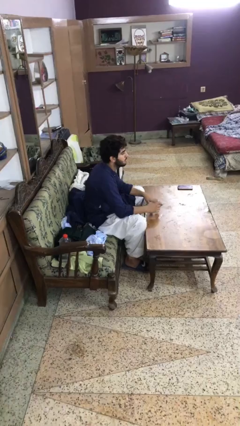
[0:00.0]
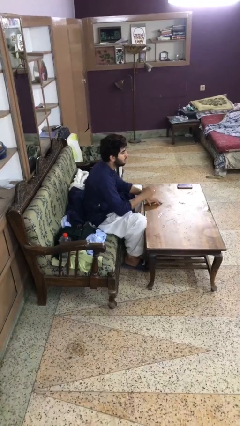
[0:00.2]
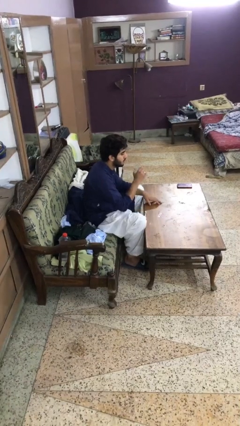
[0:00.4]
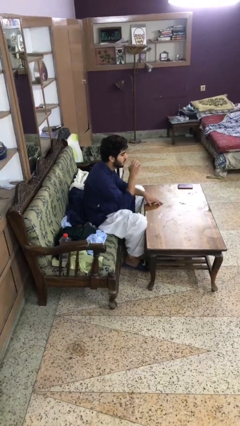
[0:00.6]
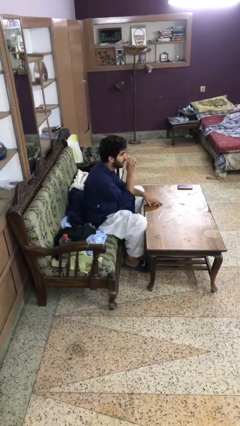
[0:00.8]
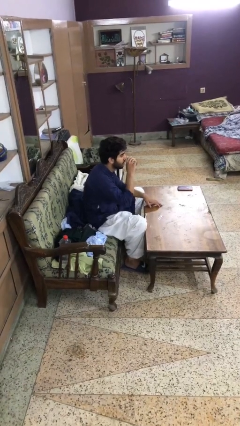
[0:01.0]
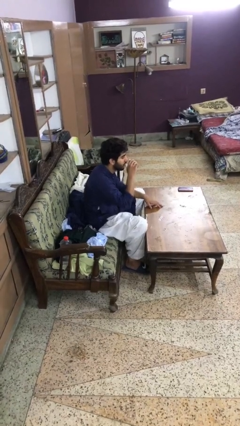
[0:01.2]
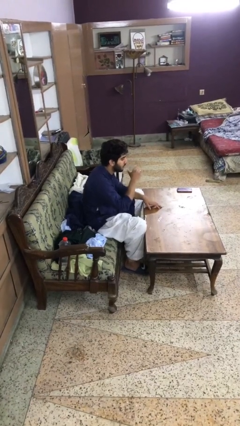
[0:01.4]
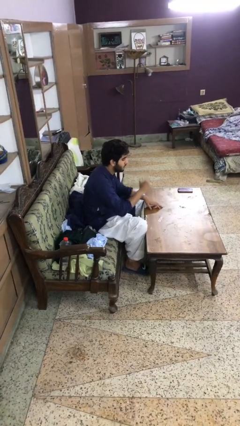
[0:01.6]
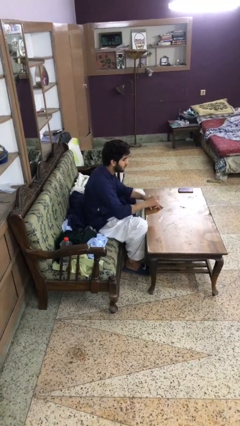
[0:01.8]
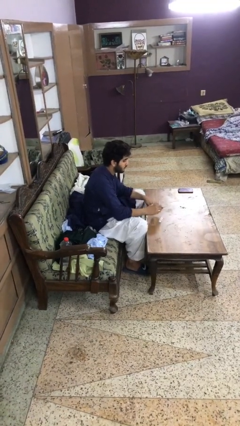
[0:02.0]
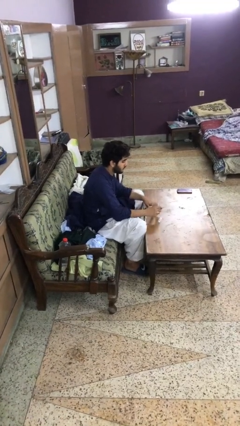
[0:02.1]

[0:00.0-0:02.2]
person drinks from cup

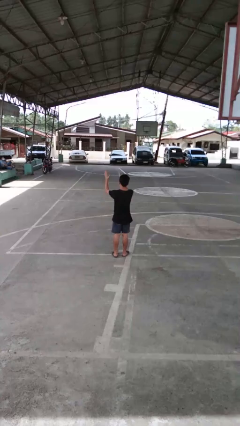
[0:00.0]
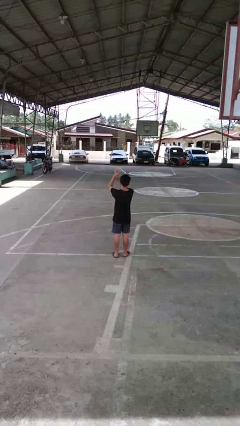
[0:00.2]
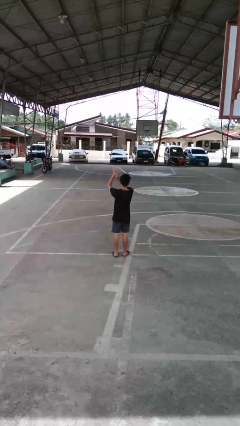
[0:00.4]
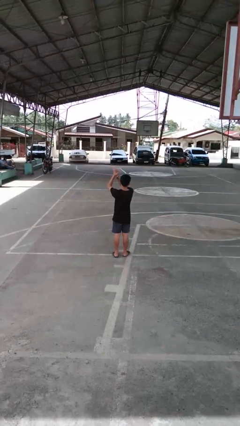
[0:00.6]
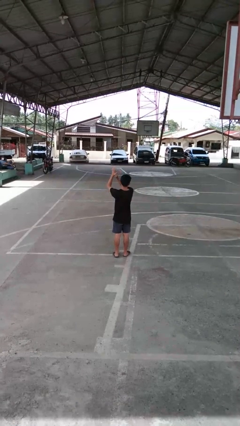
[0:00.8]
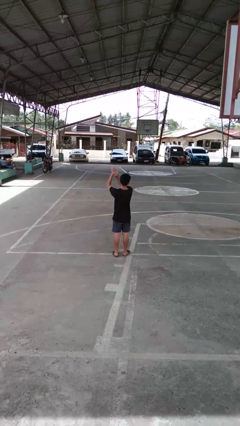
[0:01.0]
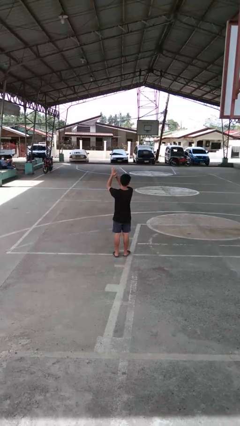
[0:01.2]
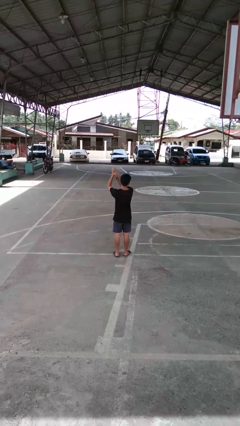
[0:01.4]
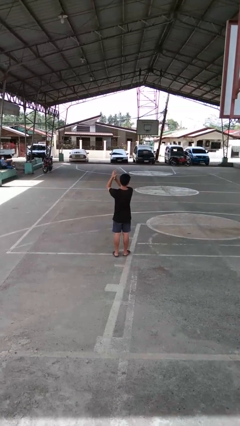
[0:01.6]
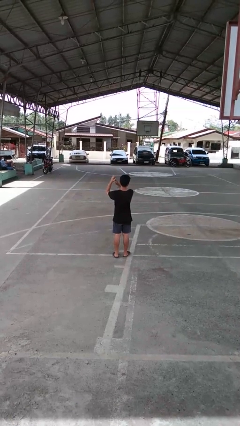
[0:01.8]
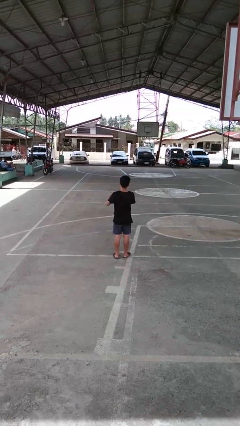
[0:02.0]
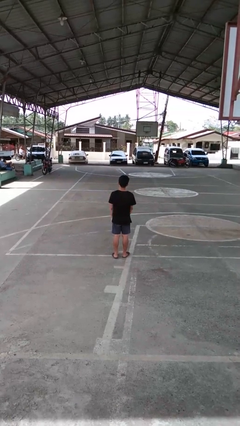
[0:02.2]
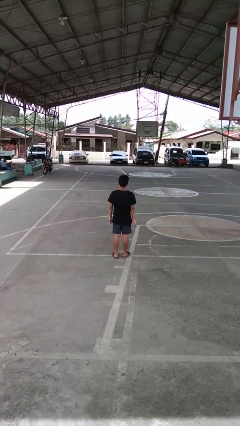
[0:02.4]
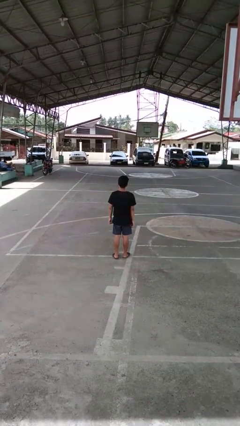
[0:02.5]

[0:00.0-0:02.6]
person claps hands

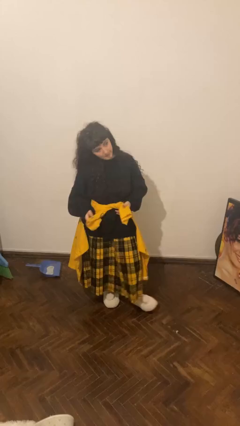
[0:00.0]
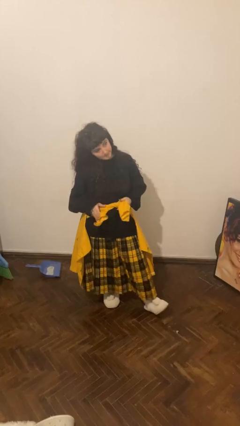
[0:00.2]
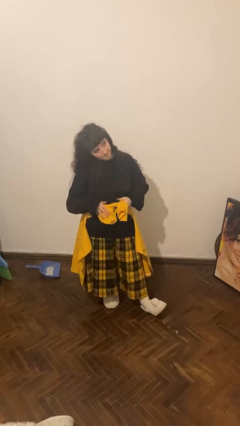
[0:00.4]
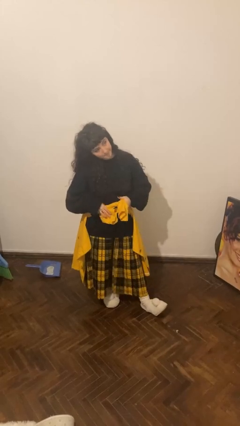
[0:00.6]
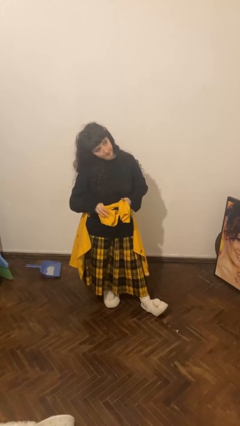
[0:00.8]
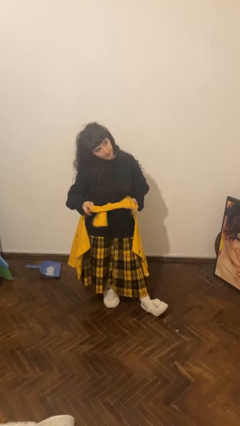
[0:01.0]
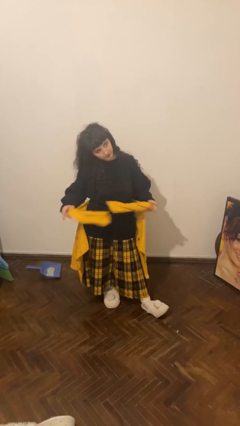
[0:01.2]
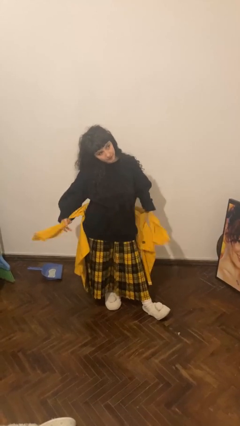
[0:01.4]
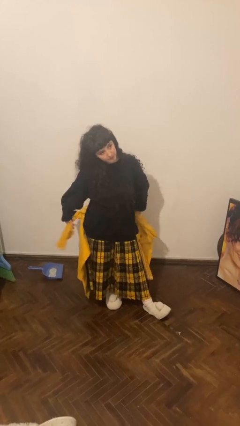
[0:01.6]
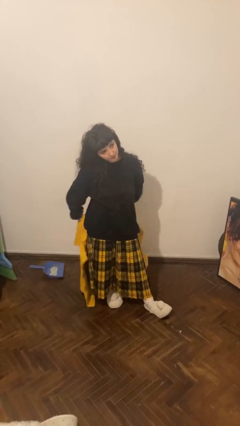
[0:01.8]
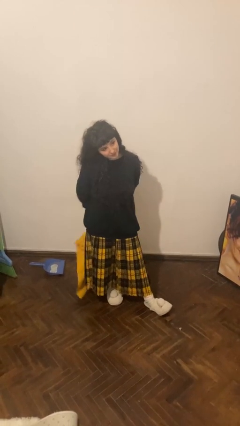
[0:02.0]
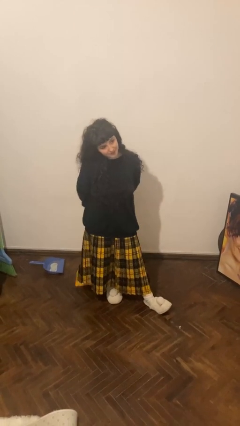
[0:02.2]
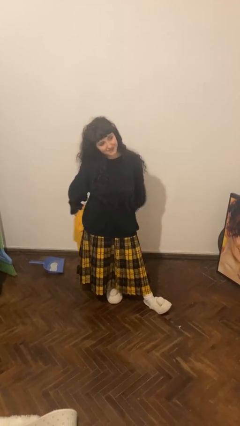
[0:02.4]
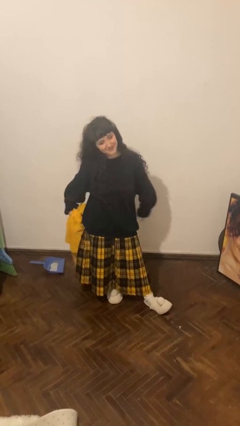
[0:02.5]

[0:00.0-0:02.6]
person unties jacket around waist

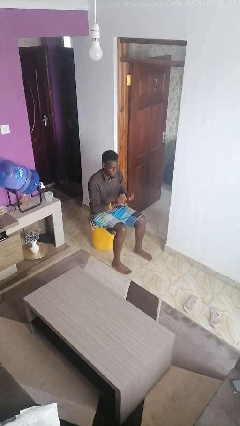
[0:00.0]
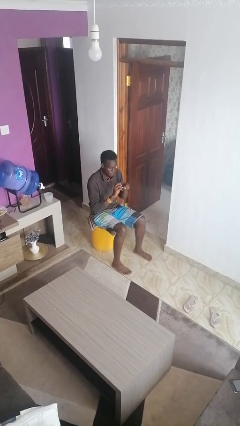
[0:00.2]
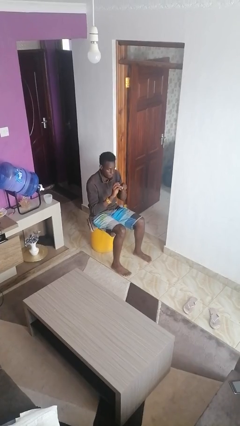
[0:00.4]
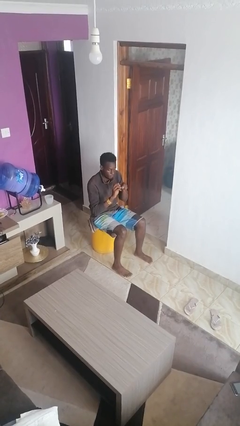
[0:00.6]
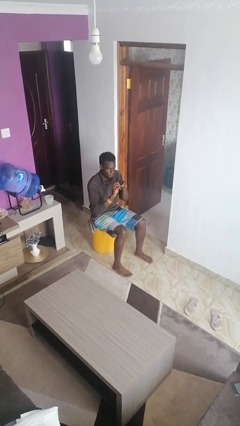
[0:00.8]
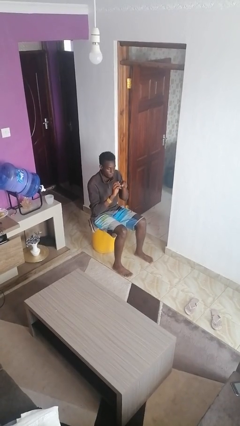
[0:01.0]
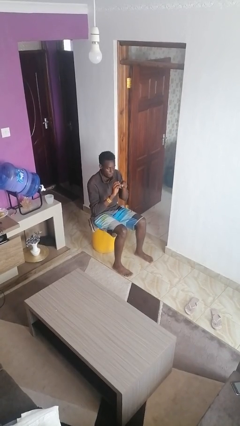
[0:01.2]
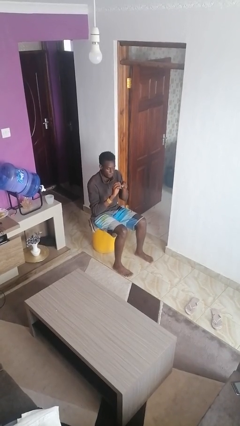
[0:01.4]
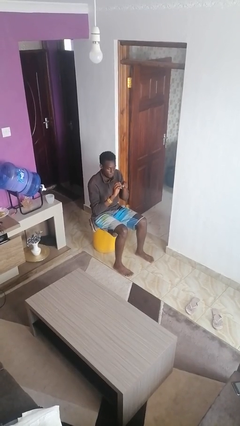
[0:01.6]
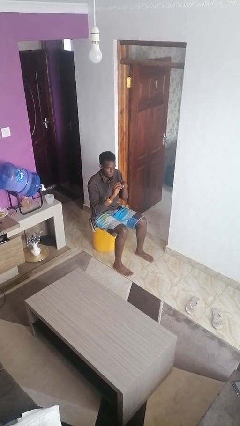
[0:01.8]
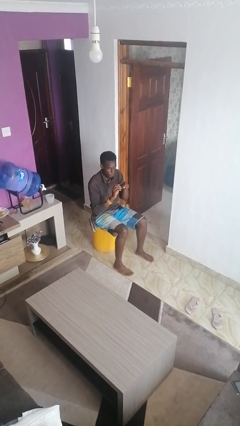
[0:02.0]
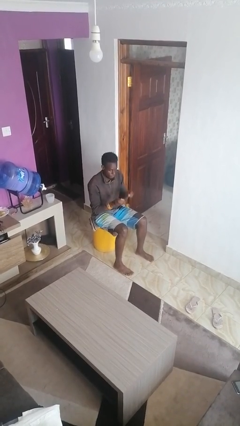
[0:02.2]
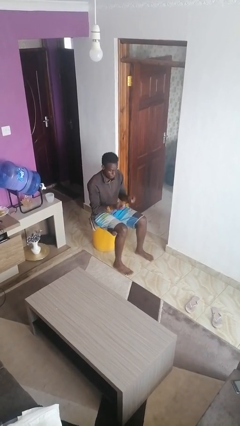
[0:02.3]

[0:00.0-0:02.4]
person files fingernails

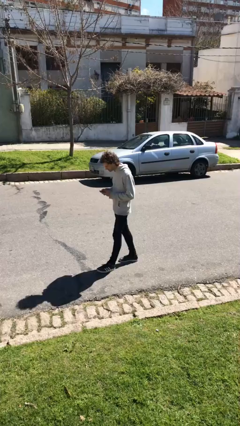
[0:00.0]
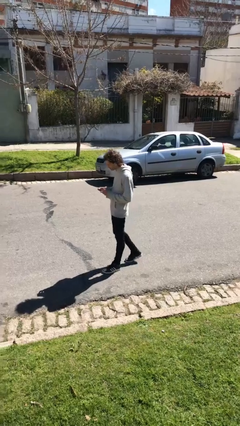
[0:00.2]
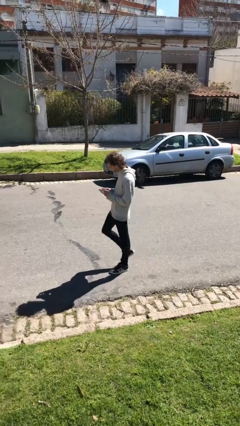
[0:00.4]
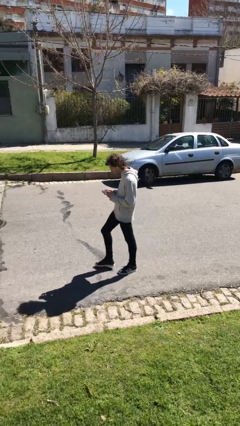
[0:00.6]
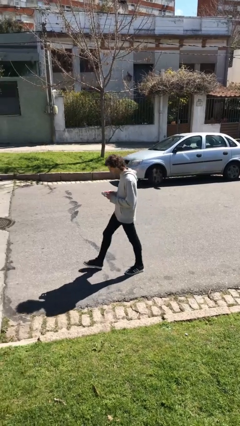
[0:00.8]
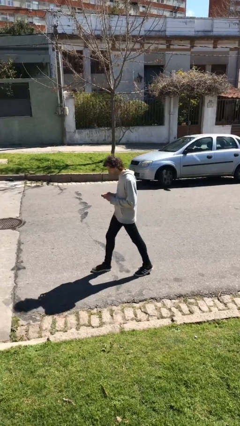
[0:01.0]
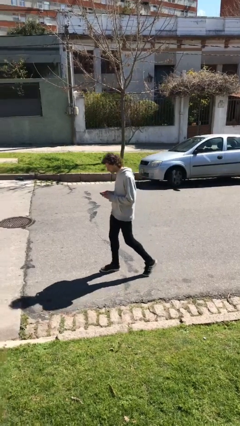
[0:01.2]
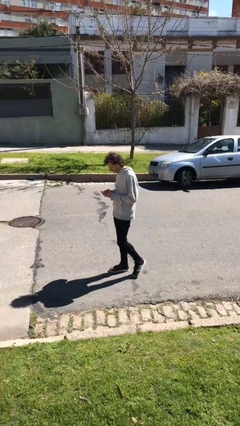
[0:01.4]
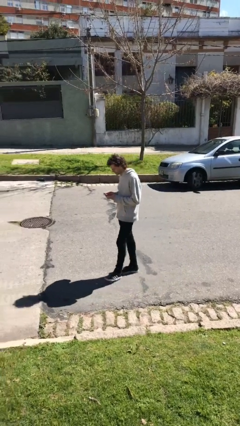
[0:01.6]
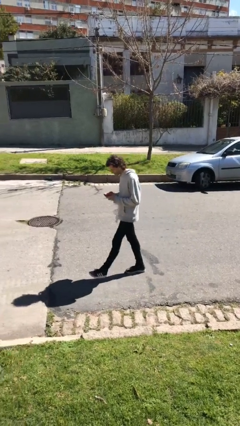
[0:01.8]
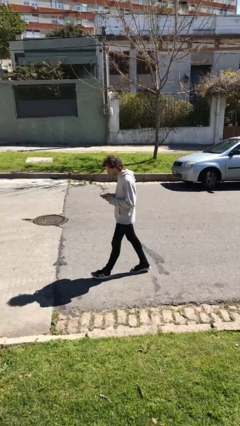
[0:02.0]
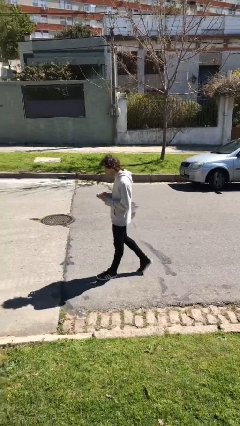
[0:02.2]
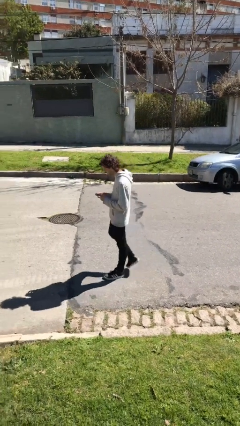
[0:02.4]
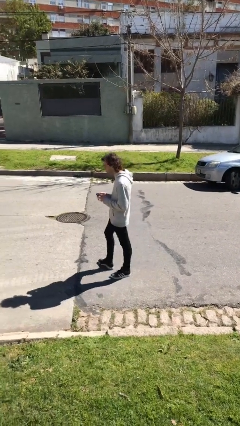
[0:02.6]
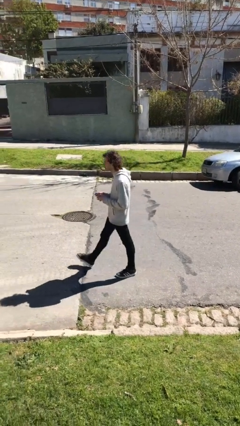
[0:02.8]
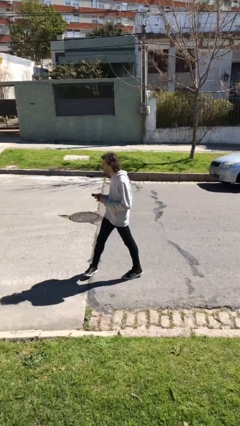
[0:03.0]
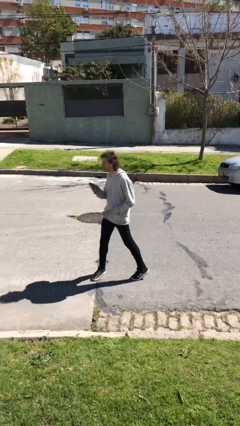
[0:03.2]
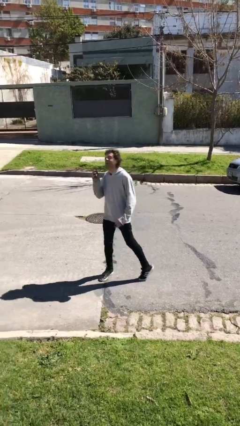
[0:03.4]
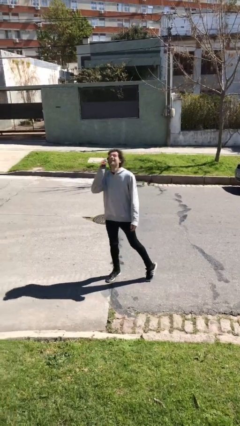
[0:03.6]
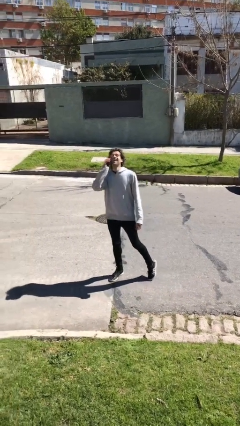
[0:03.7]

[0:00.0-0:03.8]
person texts on phone

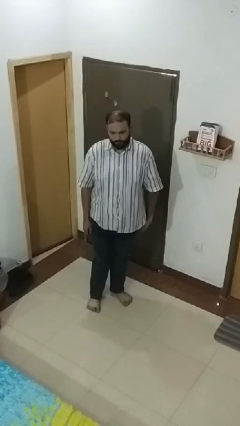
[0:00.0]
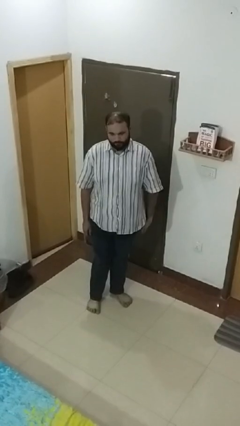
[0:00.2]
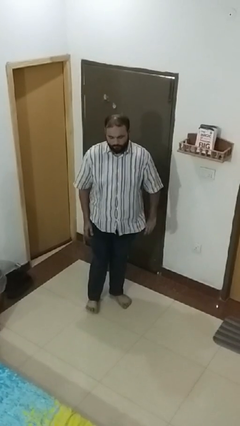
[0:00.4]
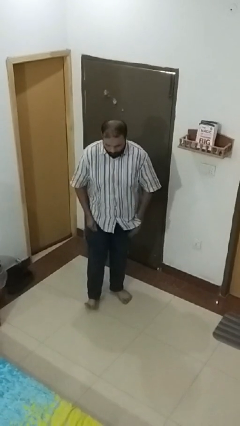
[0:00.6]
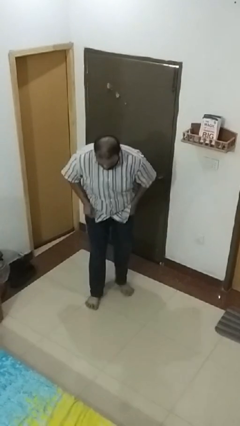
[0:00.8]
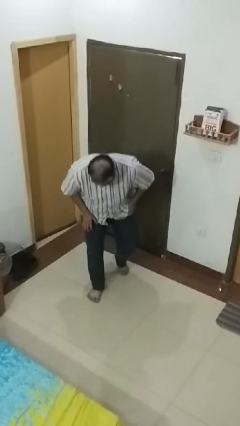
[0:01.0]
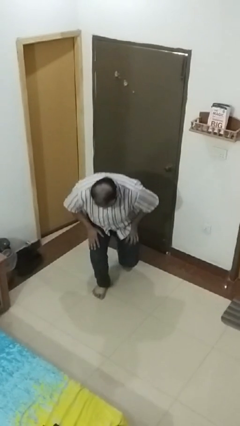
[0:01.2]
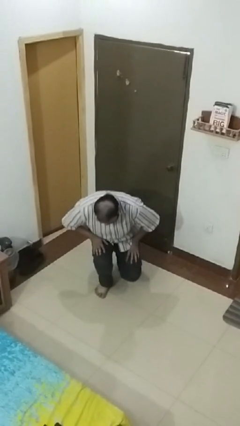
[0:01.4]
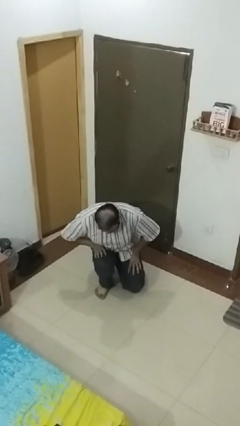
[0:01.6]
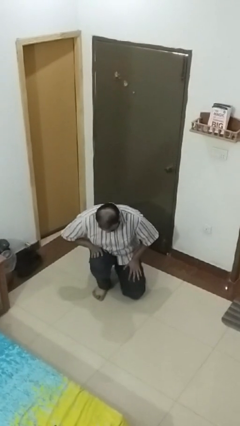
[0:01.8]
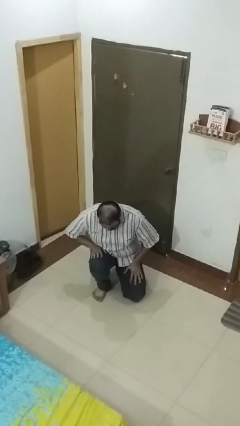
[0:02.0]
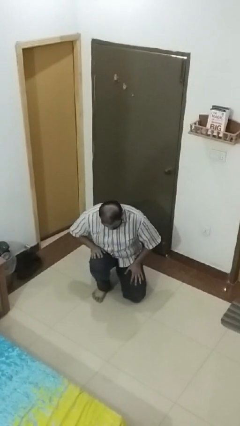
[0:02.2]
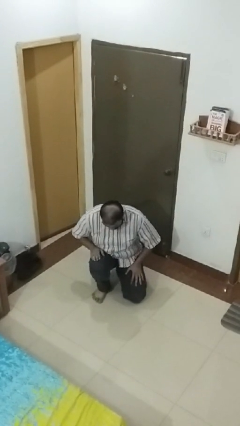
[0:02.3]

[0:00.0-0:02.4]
person kneels

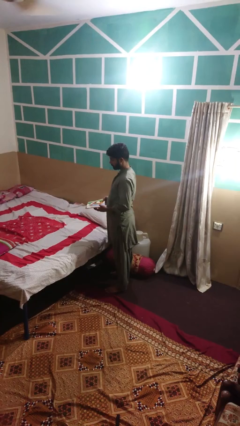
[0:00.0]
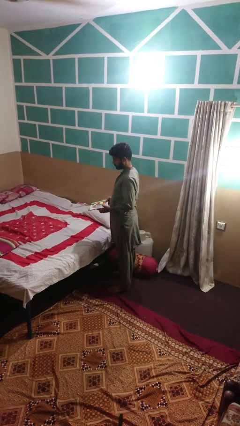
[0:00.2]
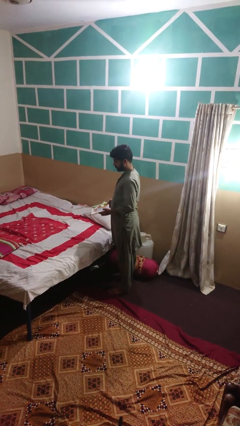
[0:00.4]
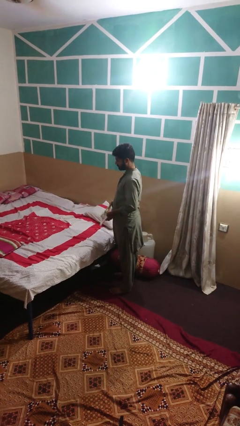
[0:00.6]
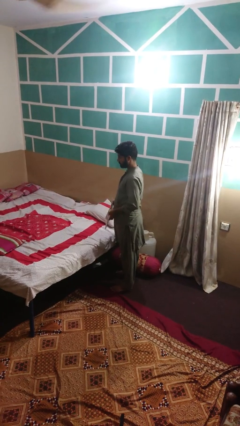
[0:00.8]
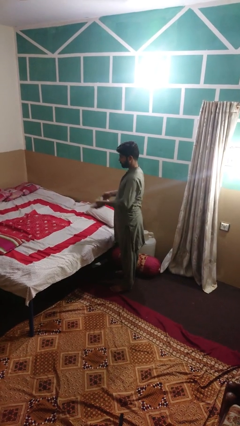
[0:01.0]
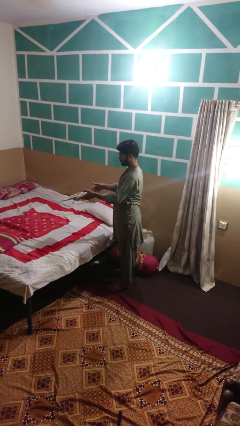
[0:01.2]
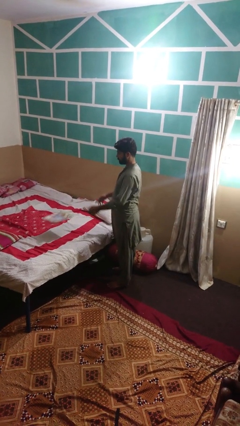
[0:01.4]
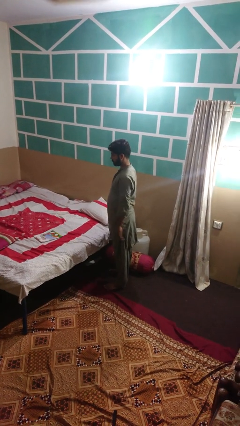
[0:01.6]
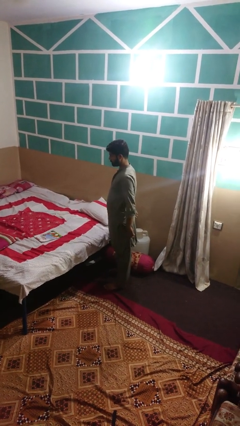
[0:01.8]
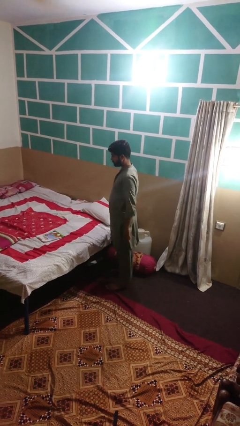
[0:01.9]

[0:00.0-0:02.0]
person throws object on bed
